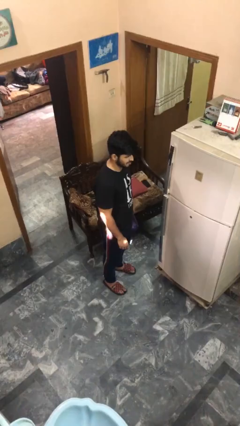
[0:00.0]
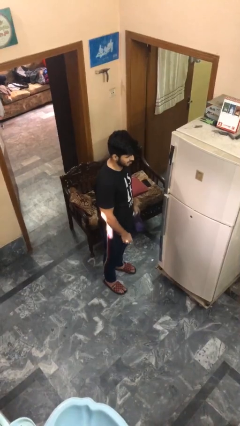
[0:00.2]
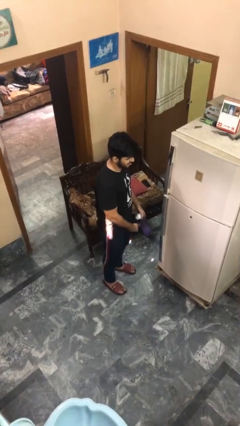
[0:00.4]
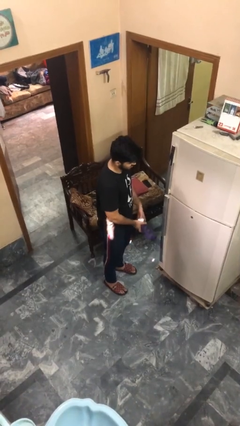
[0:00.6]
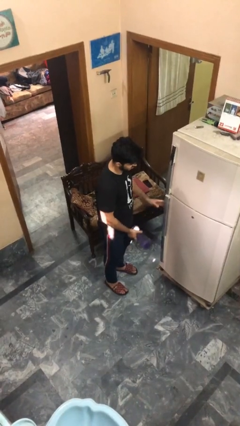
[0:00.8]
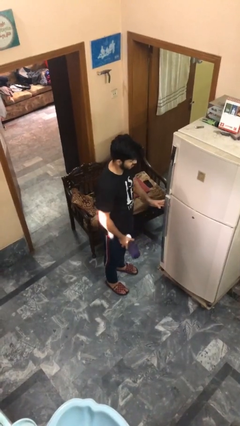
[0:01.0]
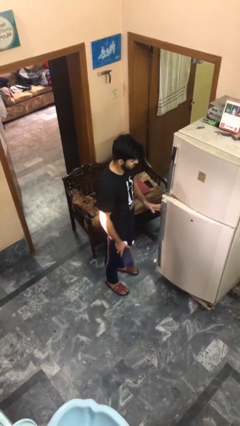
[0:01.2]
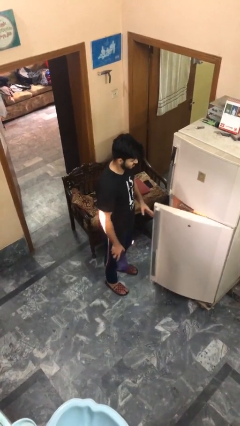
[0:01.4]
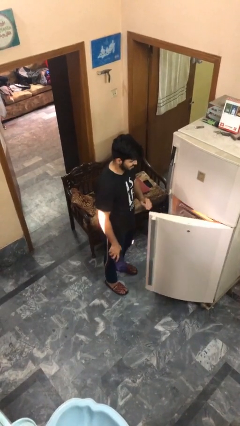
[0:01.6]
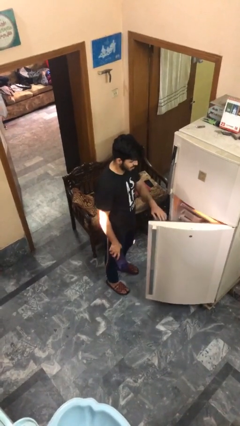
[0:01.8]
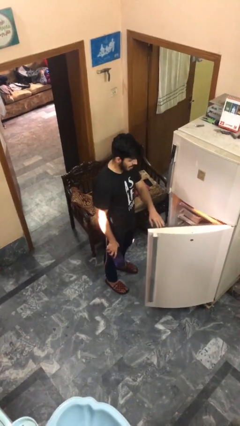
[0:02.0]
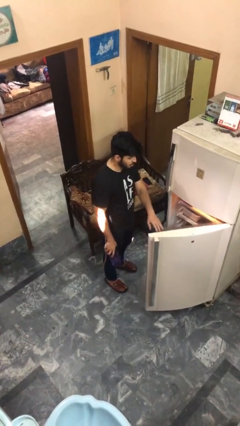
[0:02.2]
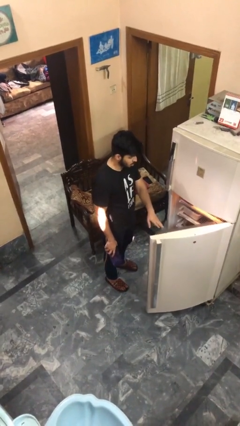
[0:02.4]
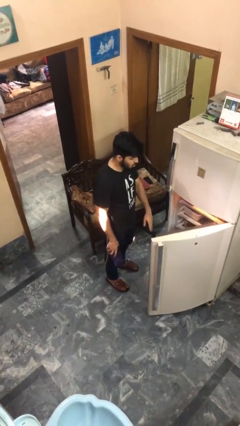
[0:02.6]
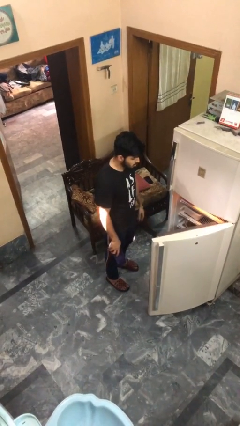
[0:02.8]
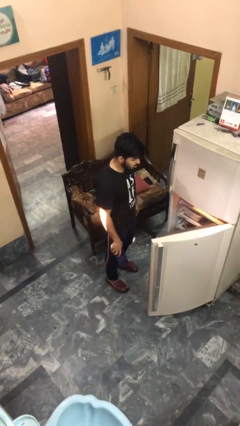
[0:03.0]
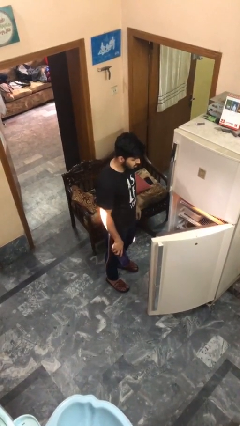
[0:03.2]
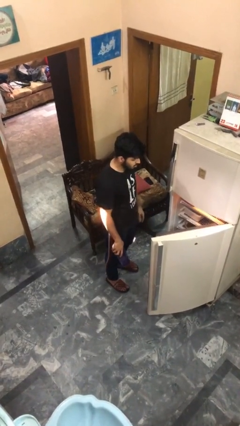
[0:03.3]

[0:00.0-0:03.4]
person opens refrigerator

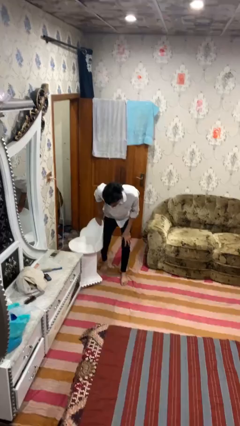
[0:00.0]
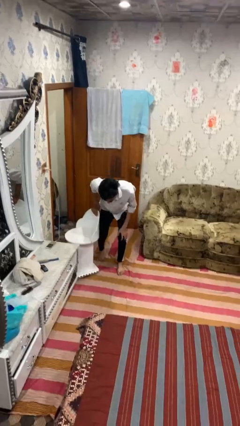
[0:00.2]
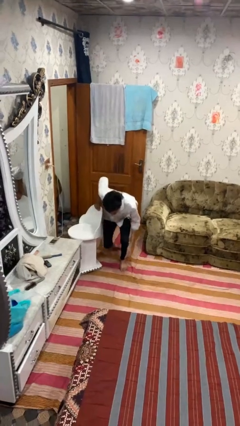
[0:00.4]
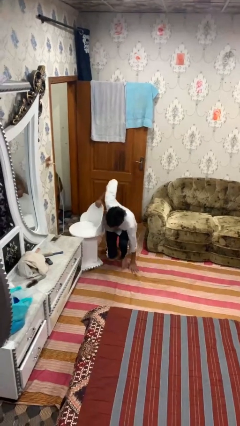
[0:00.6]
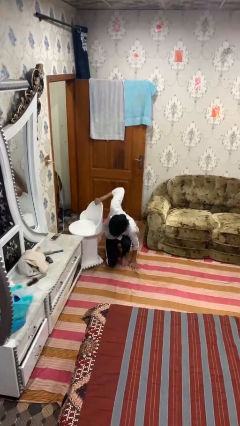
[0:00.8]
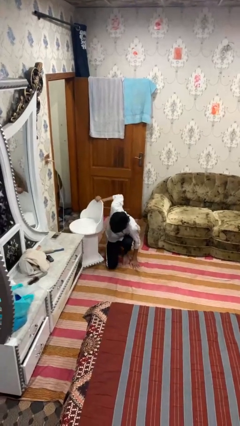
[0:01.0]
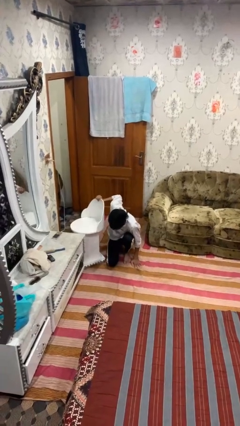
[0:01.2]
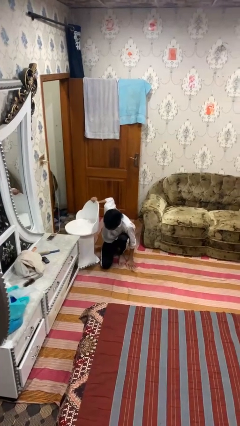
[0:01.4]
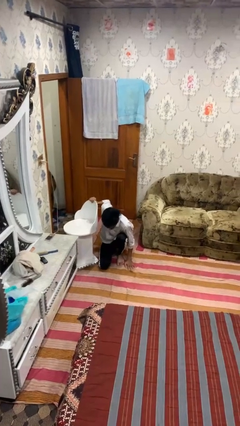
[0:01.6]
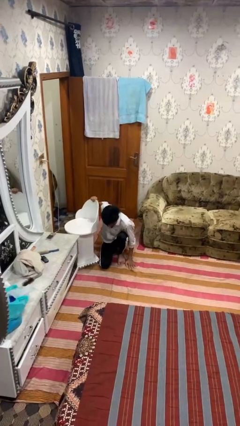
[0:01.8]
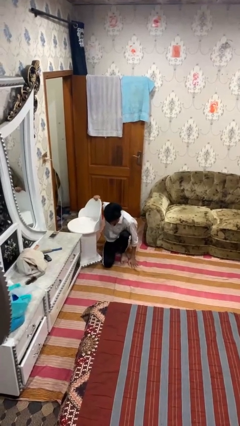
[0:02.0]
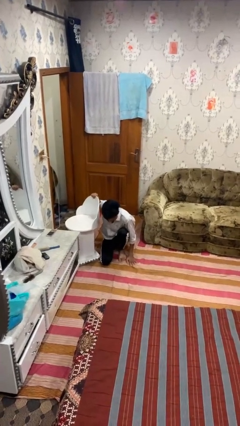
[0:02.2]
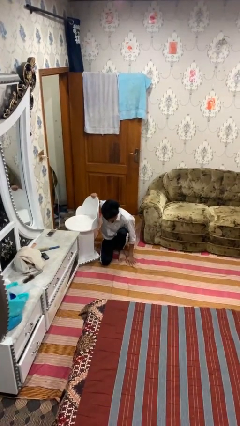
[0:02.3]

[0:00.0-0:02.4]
person lies down on floor

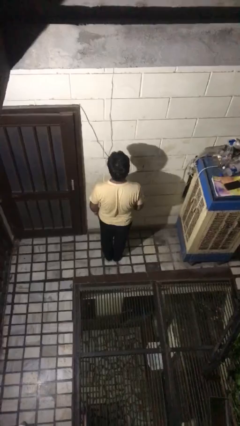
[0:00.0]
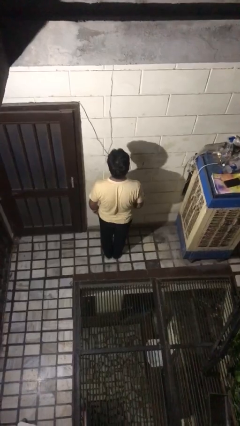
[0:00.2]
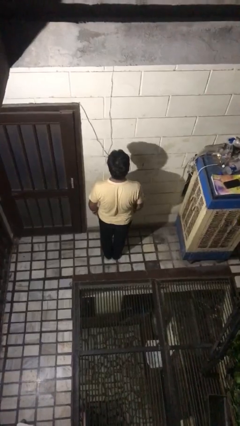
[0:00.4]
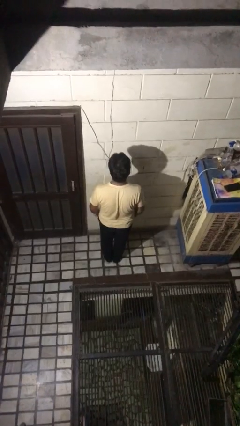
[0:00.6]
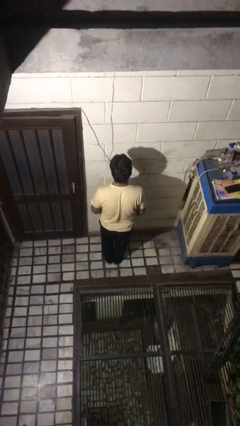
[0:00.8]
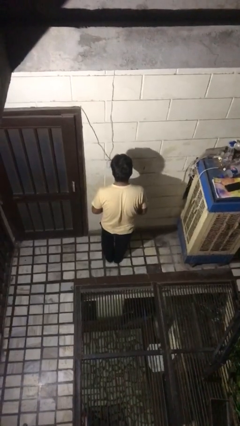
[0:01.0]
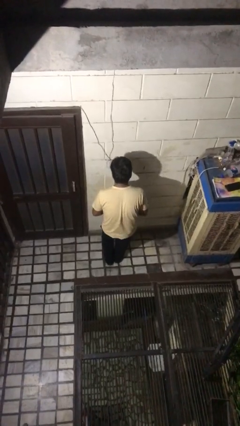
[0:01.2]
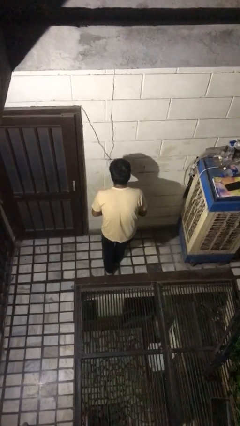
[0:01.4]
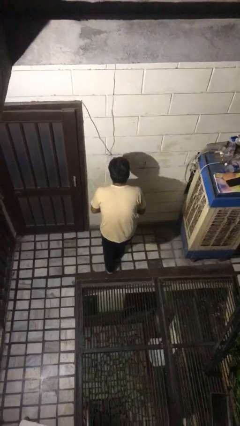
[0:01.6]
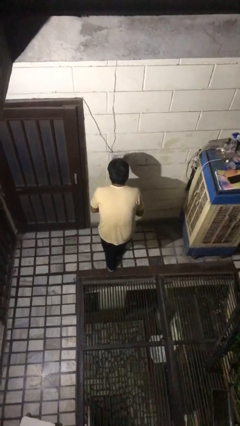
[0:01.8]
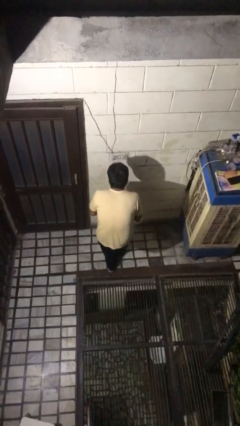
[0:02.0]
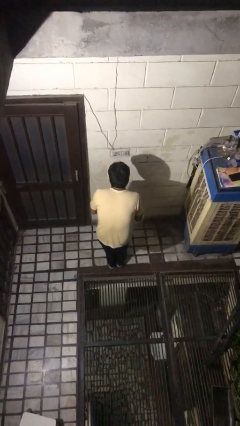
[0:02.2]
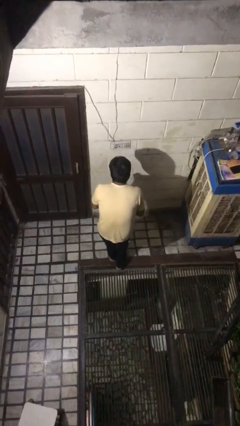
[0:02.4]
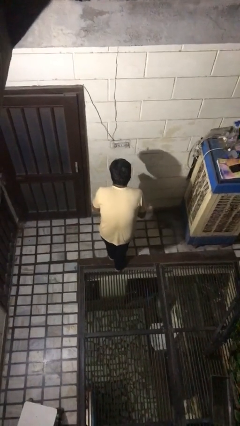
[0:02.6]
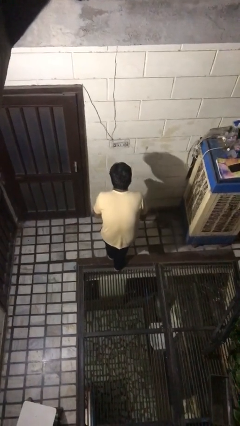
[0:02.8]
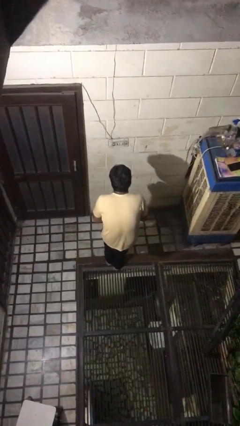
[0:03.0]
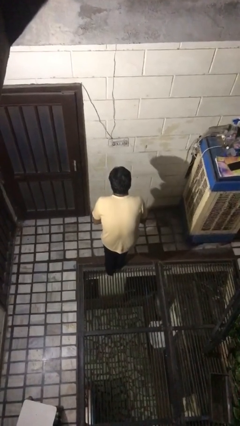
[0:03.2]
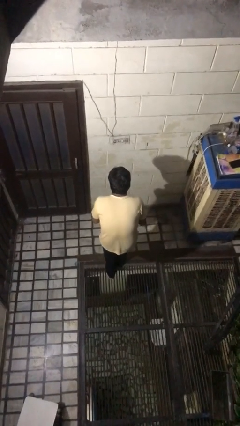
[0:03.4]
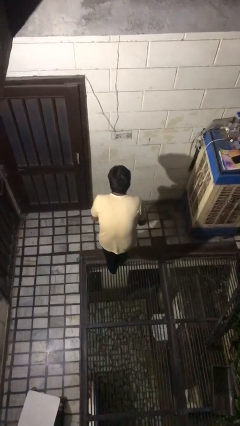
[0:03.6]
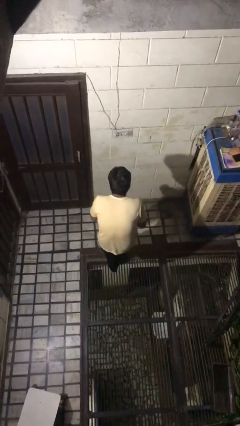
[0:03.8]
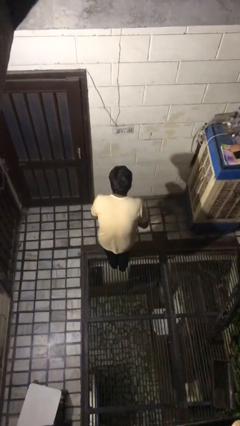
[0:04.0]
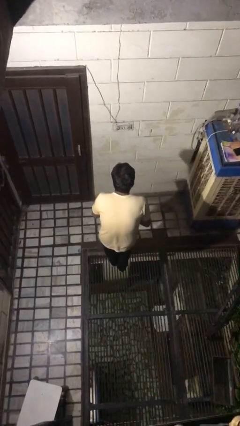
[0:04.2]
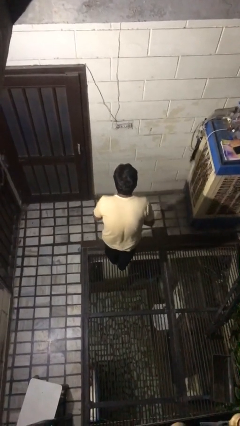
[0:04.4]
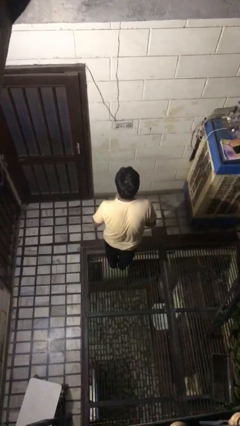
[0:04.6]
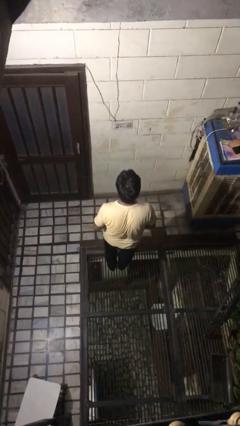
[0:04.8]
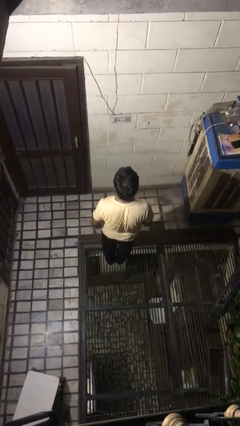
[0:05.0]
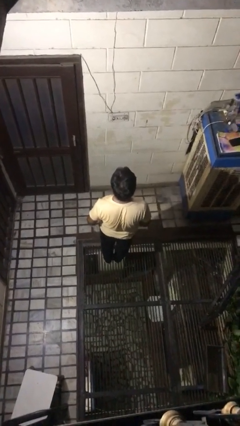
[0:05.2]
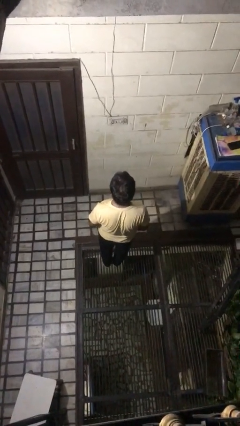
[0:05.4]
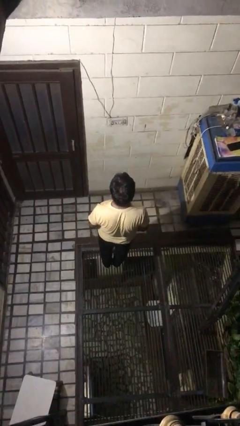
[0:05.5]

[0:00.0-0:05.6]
person walks tiptoe

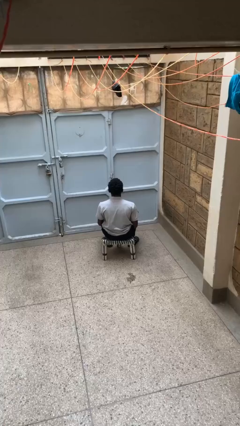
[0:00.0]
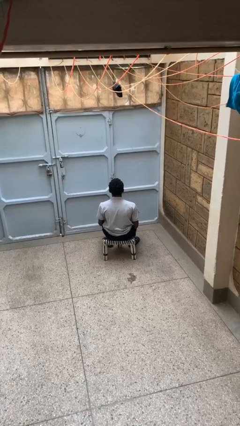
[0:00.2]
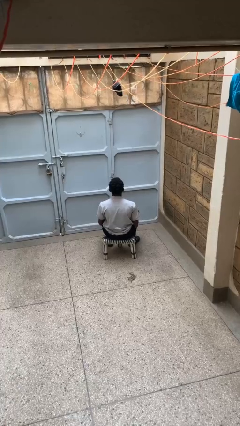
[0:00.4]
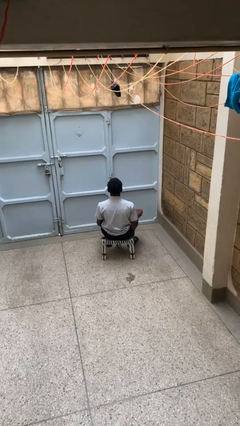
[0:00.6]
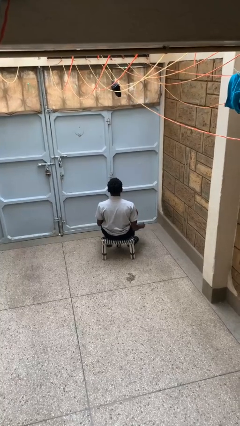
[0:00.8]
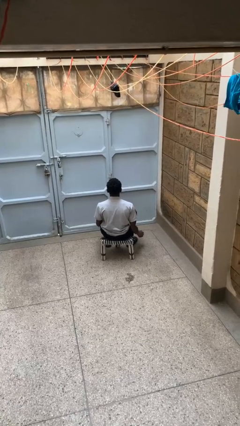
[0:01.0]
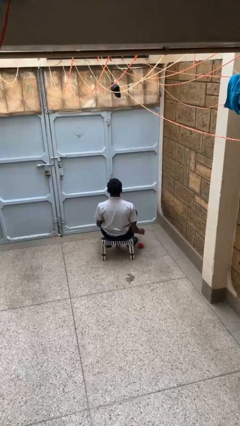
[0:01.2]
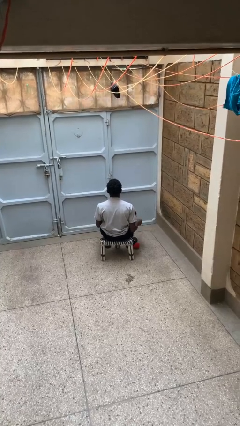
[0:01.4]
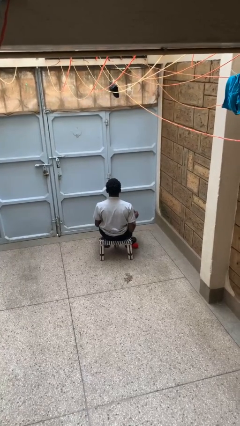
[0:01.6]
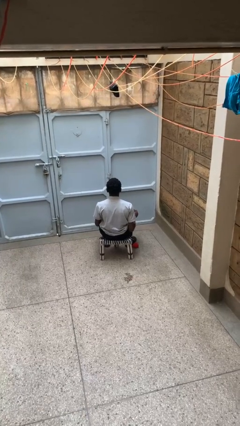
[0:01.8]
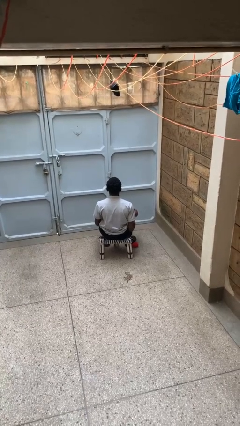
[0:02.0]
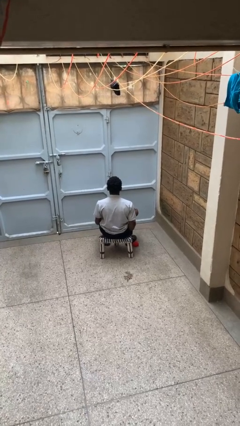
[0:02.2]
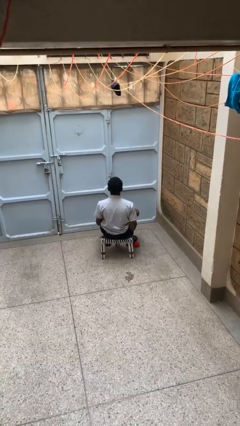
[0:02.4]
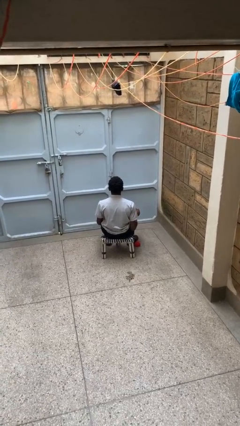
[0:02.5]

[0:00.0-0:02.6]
person drops object

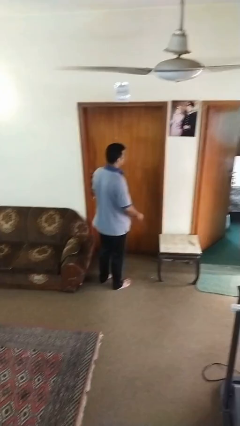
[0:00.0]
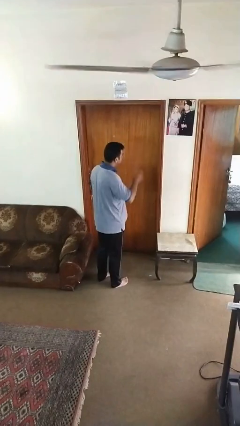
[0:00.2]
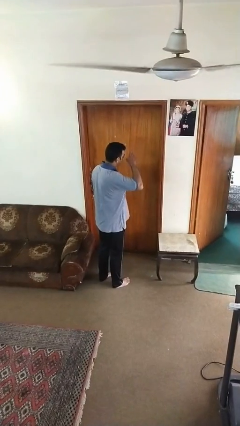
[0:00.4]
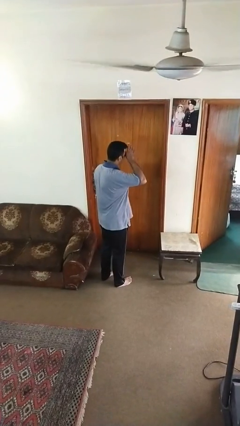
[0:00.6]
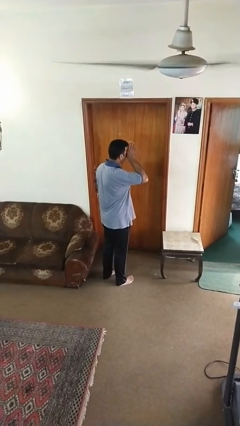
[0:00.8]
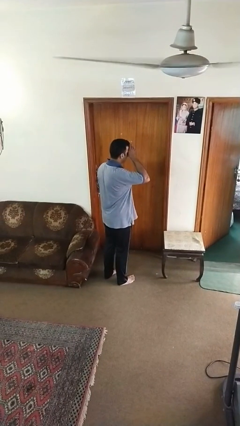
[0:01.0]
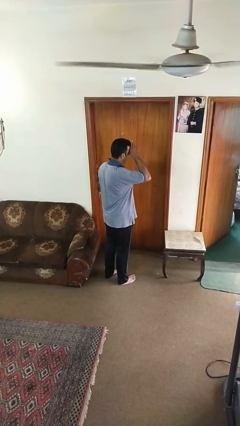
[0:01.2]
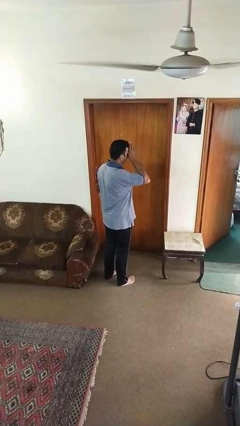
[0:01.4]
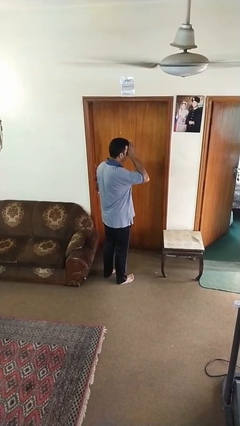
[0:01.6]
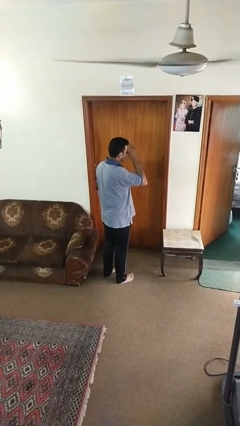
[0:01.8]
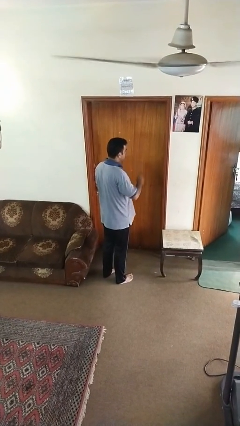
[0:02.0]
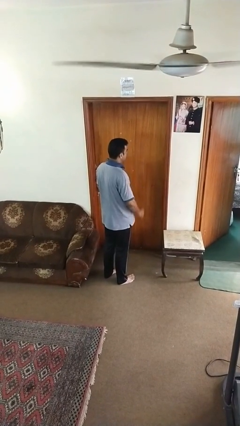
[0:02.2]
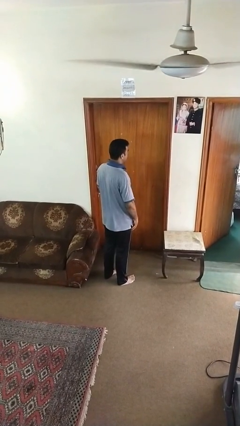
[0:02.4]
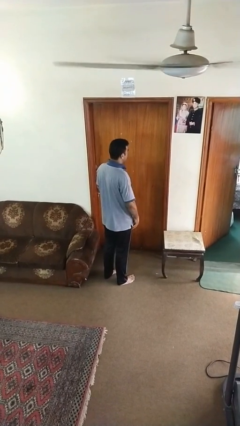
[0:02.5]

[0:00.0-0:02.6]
person rubs eyes

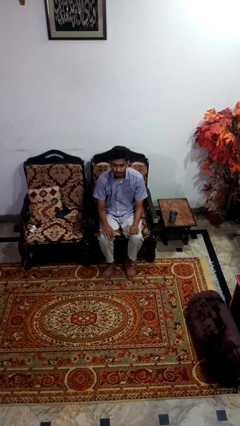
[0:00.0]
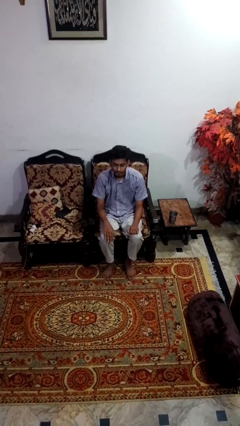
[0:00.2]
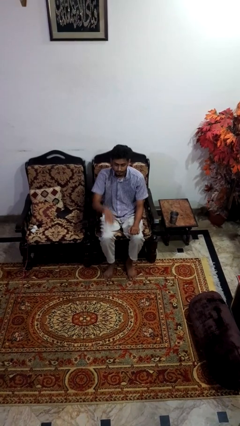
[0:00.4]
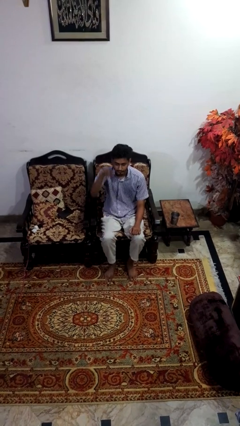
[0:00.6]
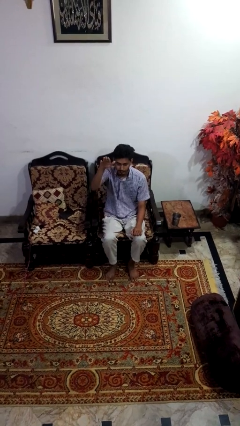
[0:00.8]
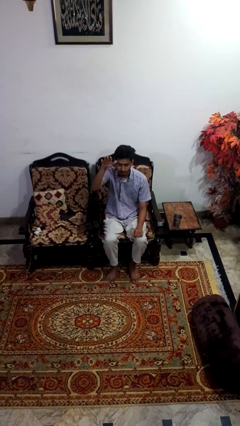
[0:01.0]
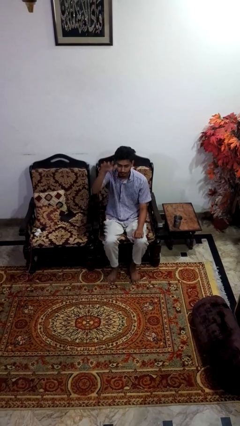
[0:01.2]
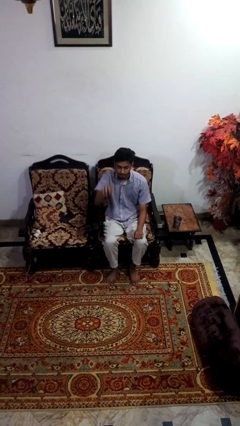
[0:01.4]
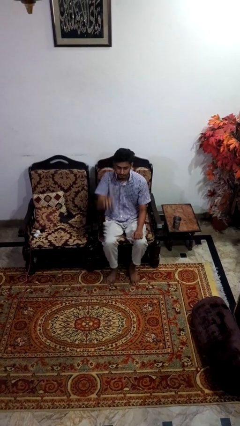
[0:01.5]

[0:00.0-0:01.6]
person gestures swipe up
